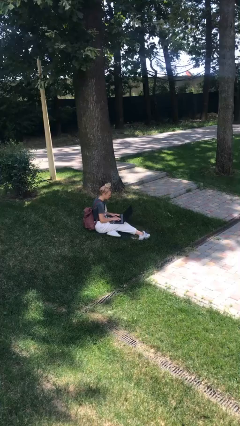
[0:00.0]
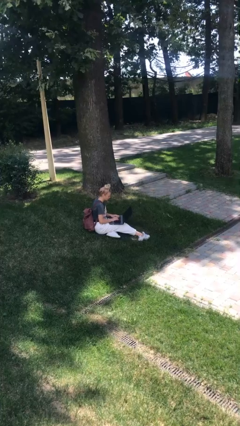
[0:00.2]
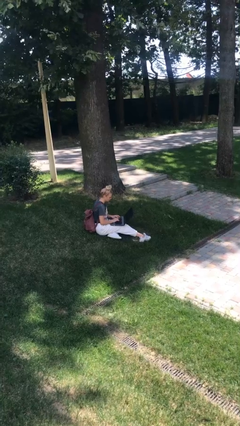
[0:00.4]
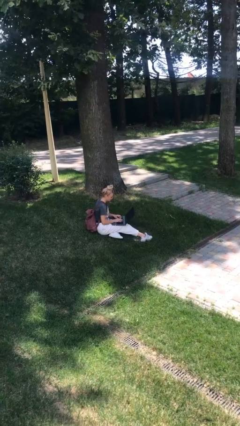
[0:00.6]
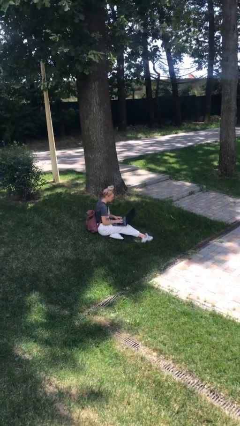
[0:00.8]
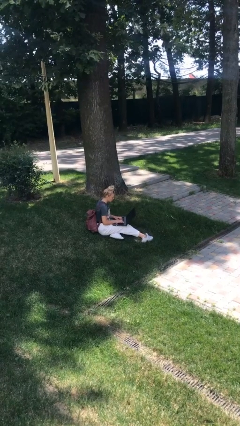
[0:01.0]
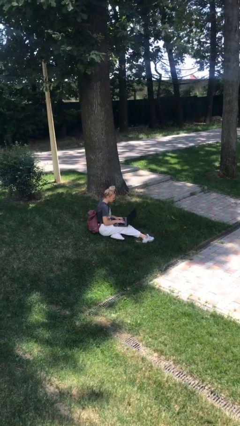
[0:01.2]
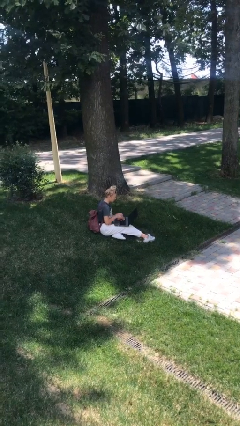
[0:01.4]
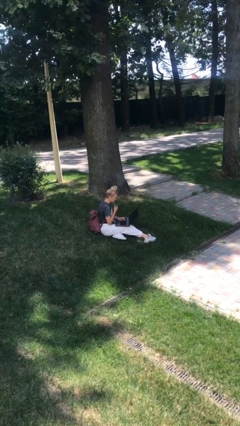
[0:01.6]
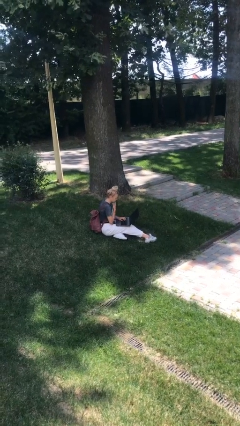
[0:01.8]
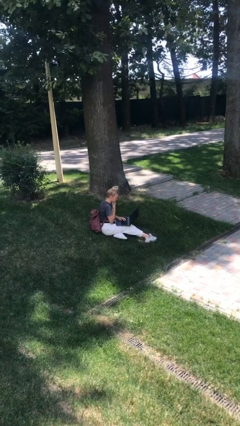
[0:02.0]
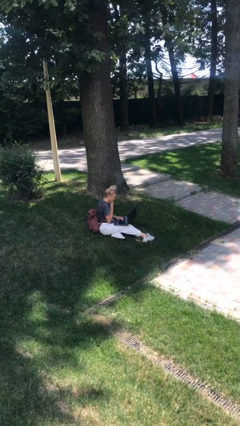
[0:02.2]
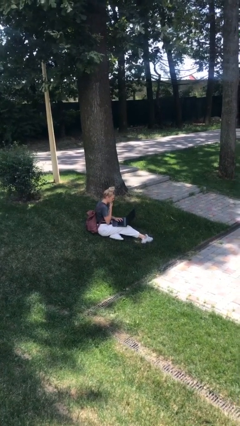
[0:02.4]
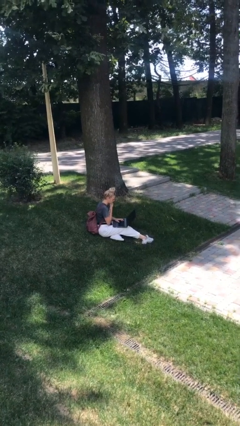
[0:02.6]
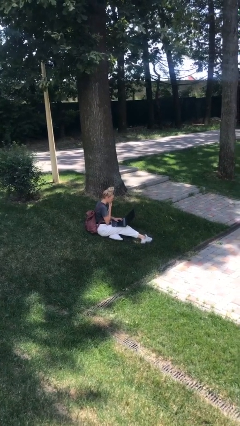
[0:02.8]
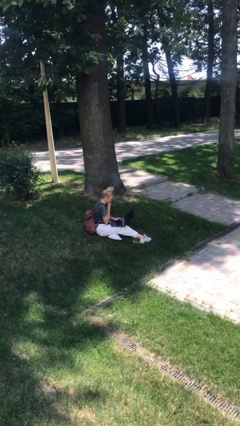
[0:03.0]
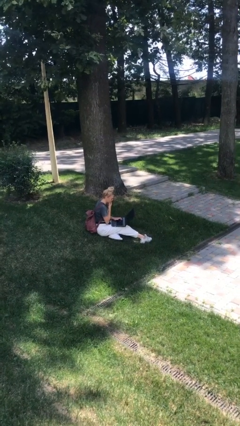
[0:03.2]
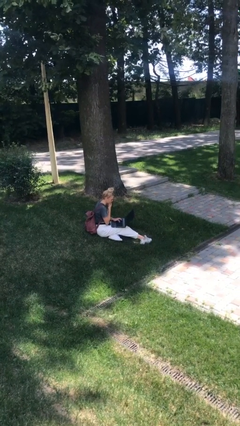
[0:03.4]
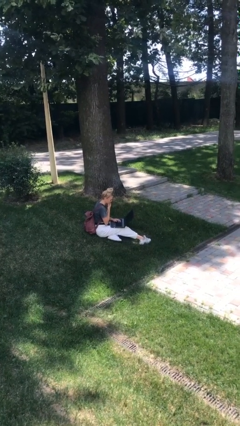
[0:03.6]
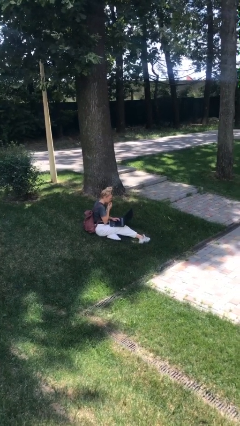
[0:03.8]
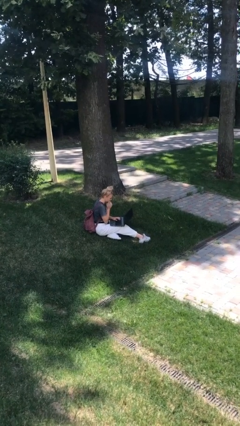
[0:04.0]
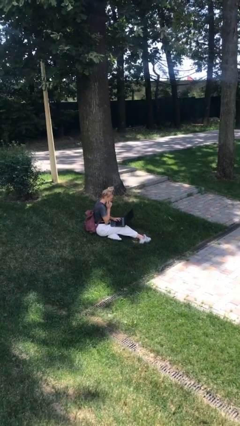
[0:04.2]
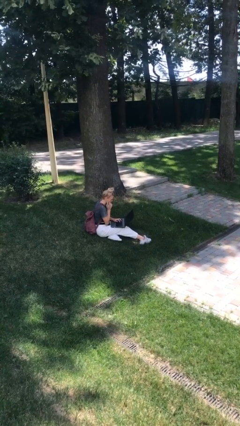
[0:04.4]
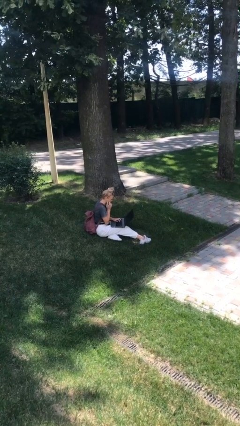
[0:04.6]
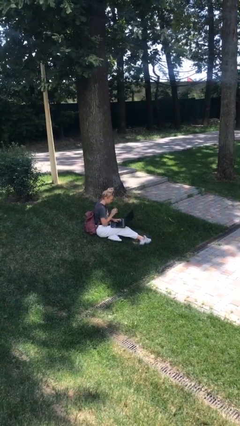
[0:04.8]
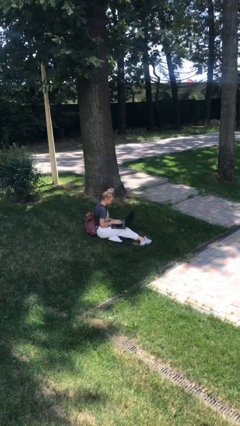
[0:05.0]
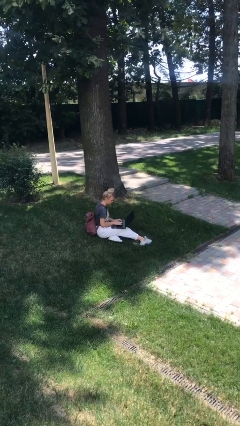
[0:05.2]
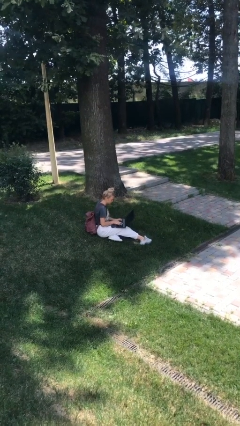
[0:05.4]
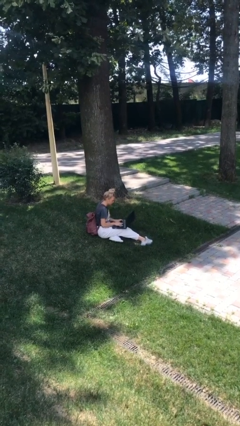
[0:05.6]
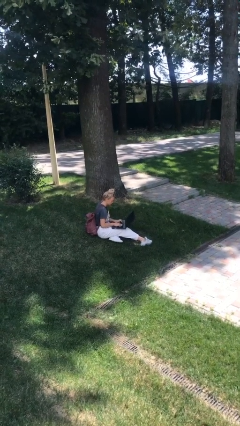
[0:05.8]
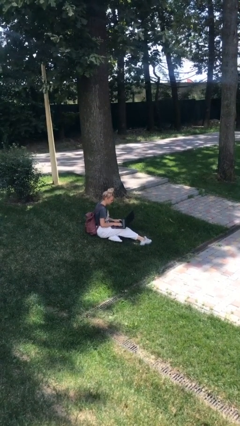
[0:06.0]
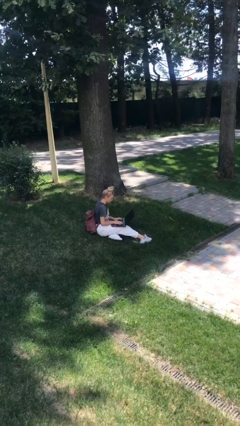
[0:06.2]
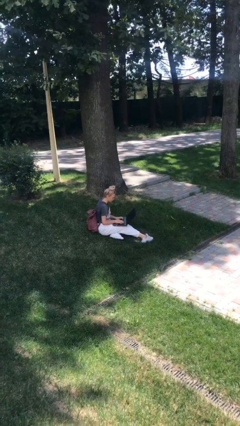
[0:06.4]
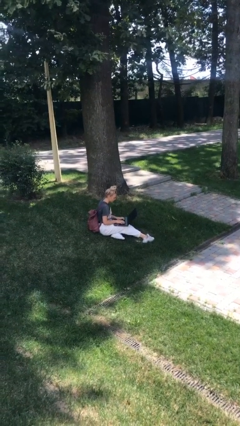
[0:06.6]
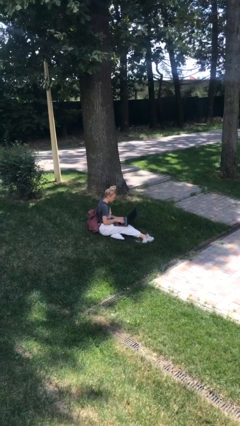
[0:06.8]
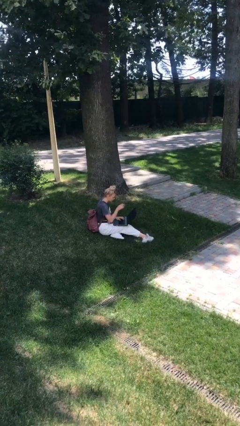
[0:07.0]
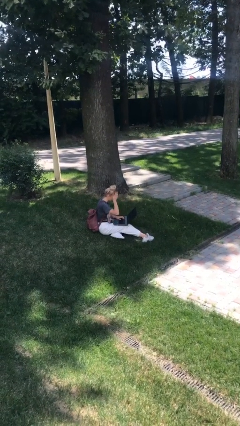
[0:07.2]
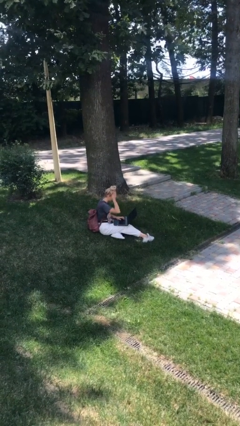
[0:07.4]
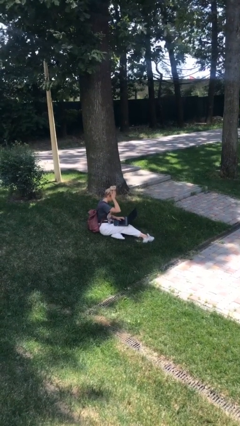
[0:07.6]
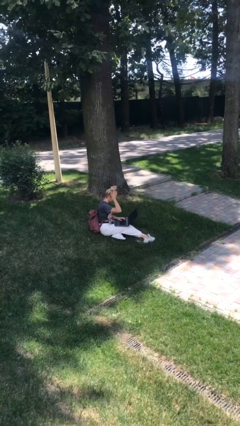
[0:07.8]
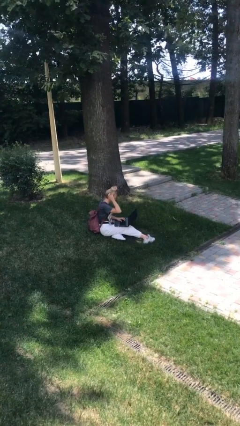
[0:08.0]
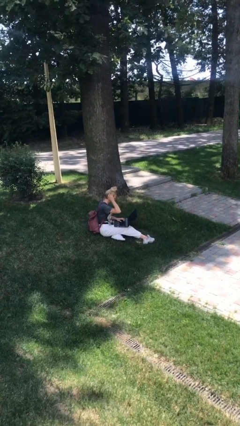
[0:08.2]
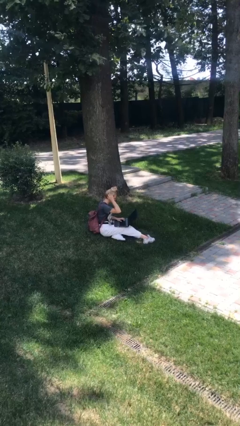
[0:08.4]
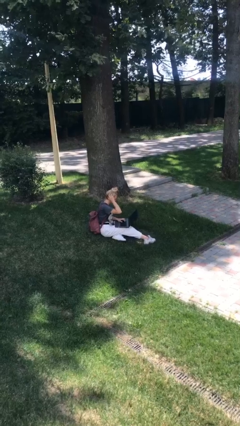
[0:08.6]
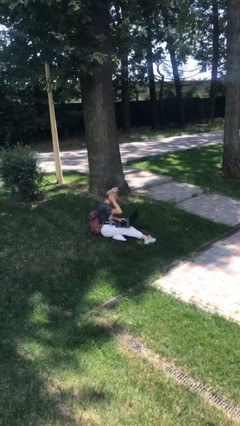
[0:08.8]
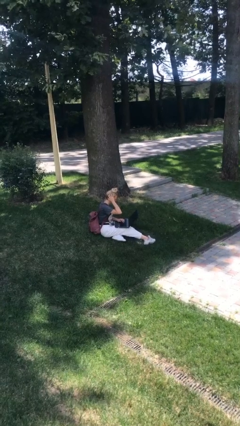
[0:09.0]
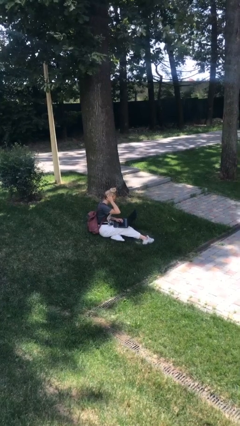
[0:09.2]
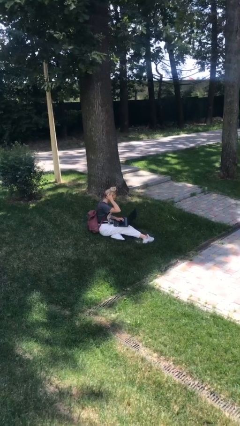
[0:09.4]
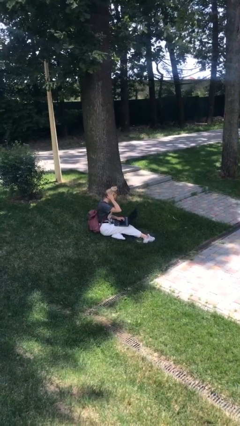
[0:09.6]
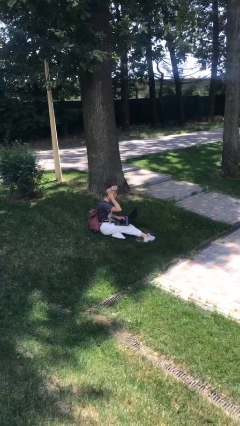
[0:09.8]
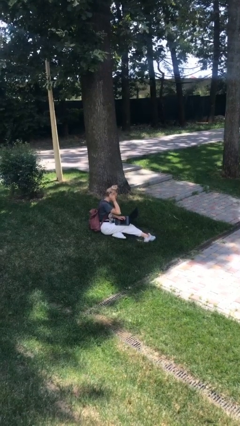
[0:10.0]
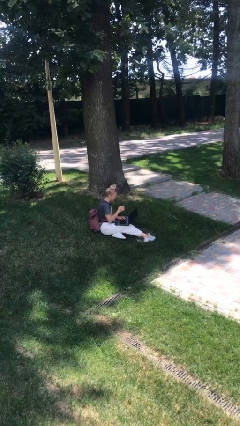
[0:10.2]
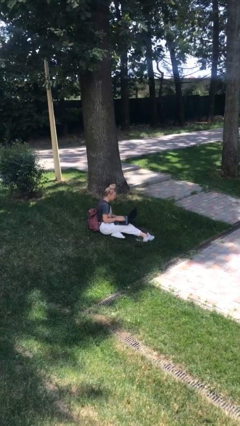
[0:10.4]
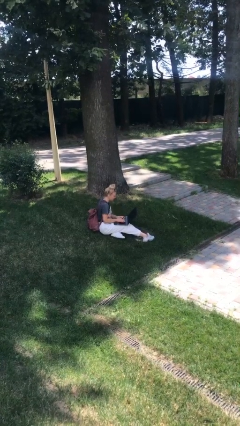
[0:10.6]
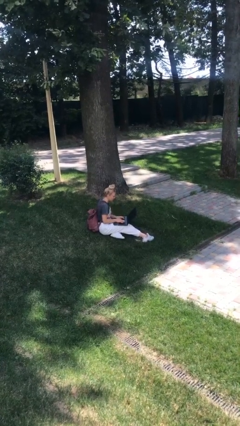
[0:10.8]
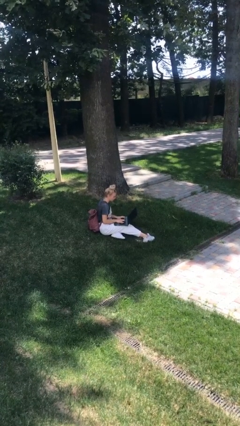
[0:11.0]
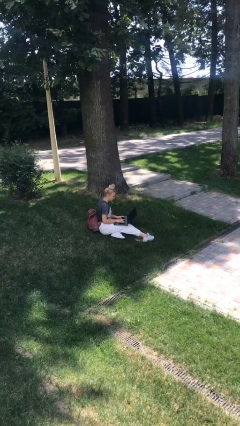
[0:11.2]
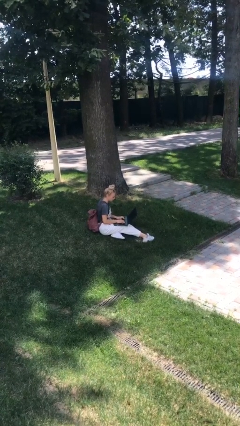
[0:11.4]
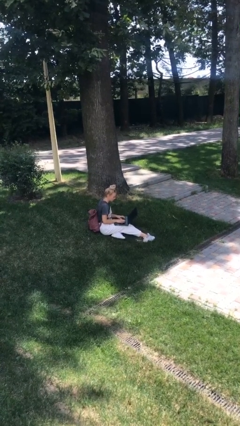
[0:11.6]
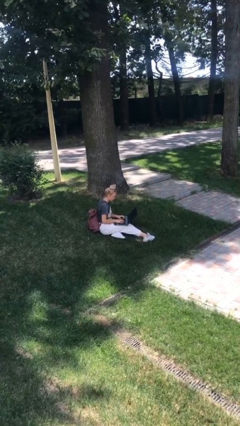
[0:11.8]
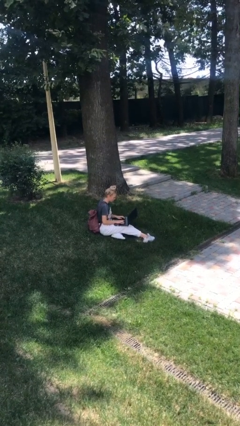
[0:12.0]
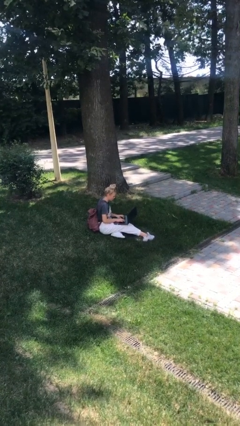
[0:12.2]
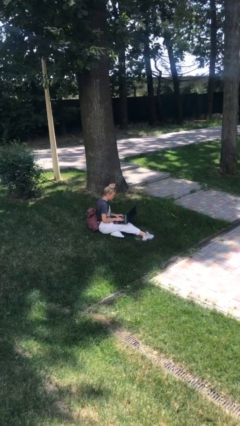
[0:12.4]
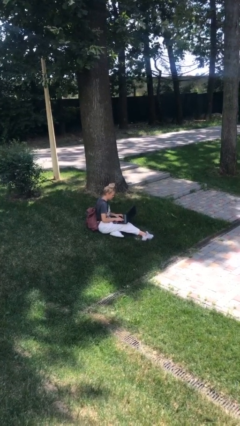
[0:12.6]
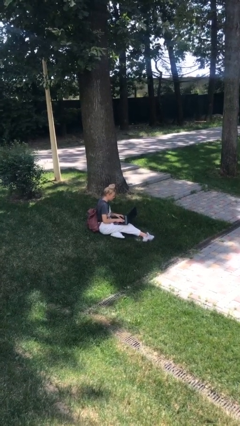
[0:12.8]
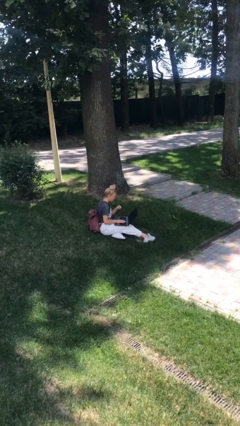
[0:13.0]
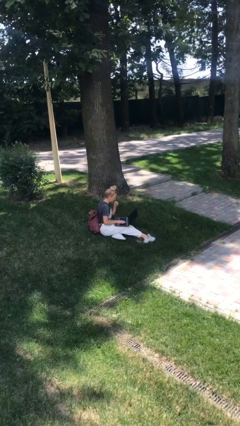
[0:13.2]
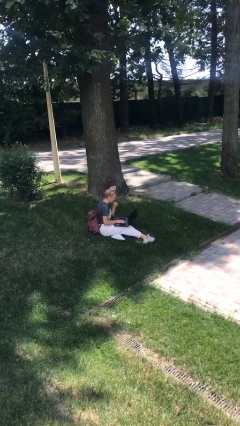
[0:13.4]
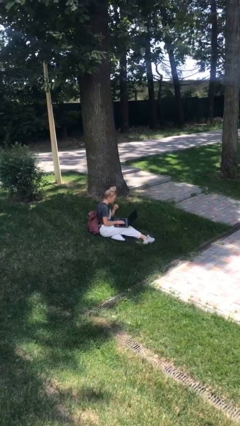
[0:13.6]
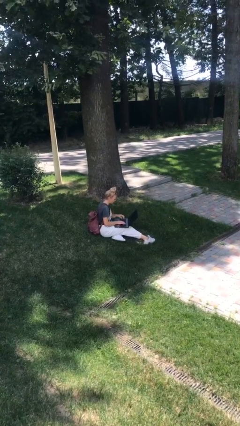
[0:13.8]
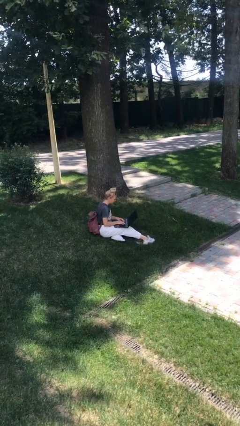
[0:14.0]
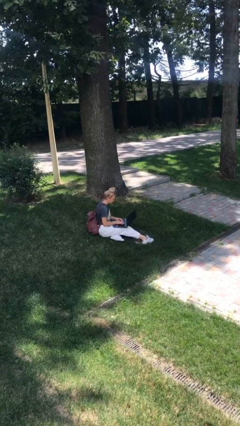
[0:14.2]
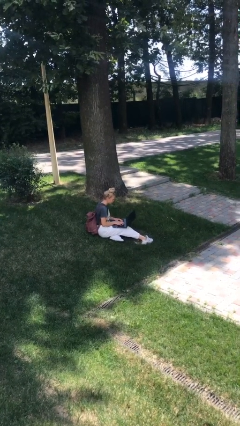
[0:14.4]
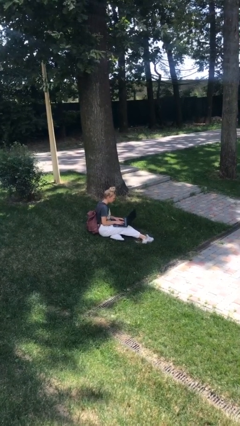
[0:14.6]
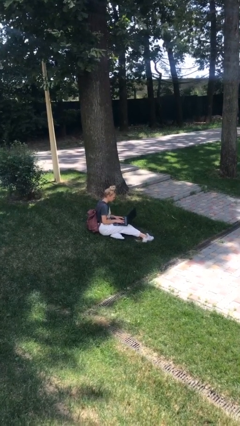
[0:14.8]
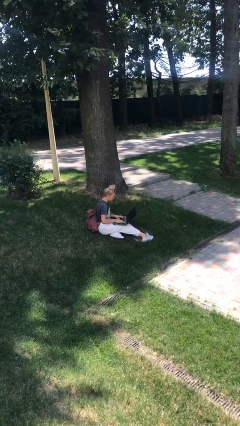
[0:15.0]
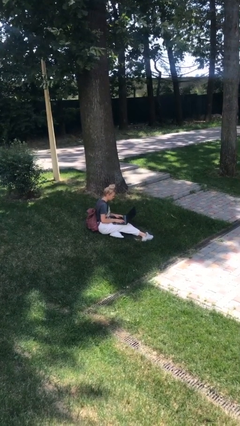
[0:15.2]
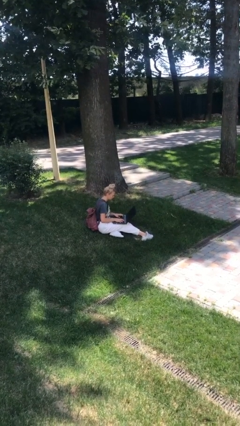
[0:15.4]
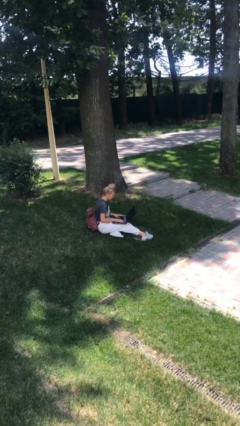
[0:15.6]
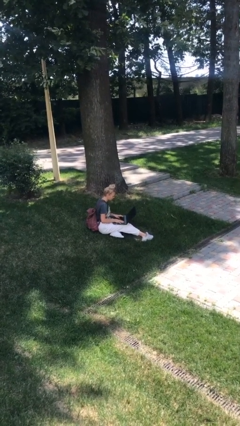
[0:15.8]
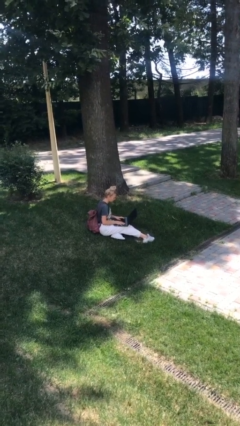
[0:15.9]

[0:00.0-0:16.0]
person interacts with laptop

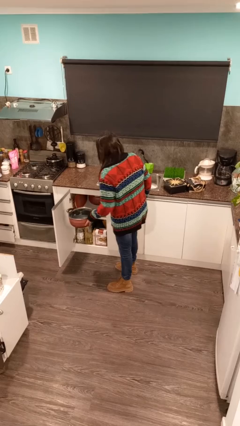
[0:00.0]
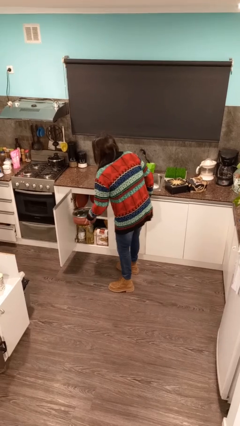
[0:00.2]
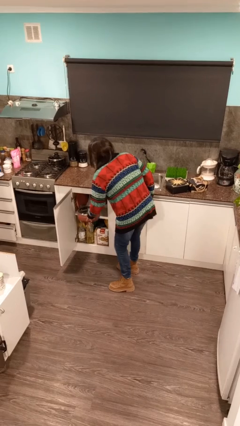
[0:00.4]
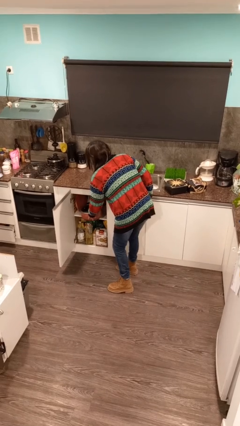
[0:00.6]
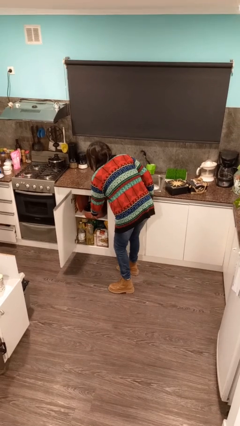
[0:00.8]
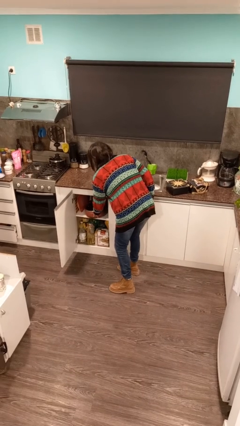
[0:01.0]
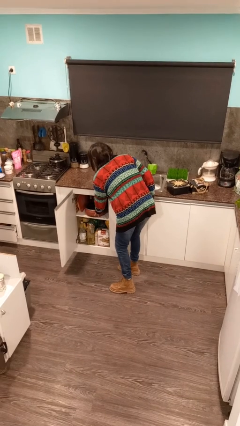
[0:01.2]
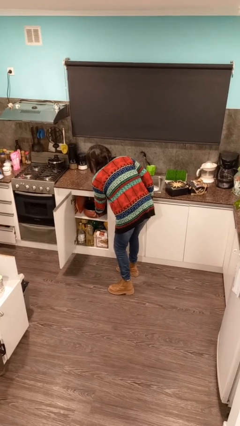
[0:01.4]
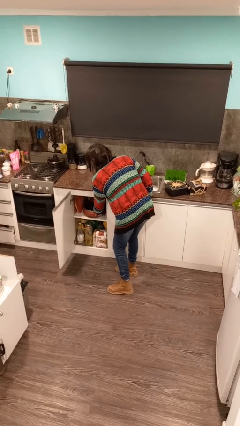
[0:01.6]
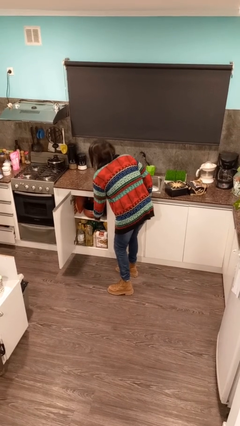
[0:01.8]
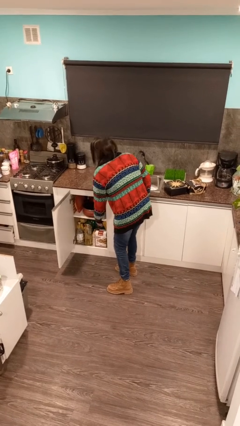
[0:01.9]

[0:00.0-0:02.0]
person puts down object into cabinet

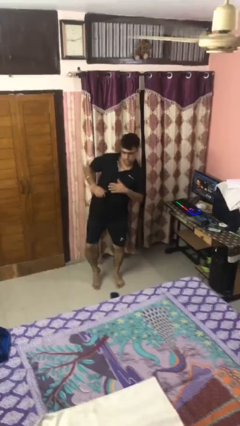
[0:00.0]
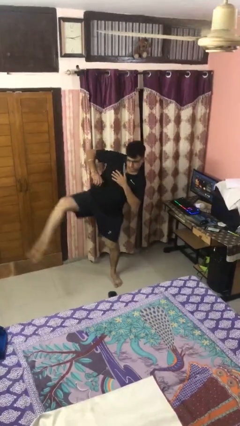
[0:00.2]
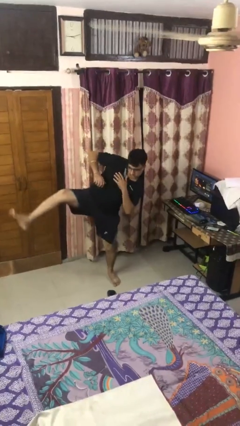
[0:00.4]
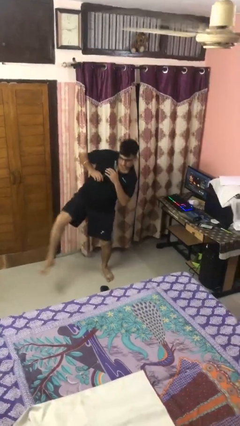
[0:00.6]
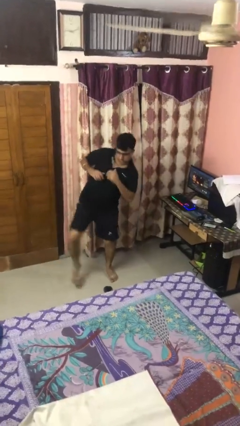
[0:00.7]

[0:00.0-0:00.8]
person karate kicks
